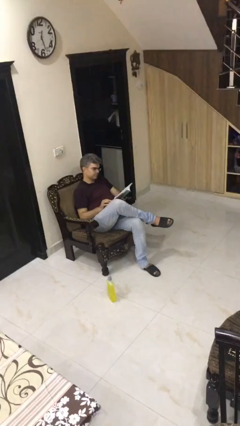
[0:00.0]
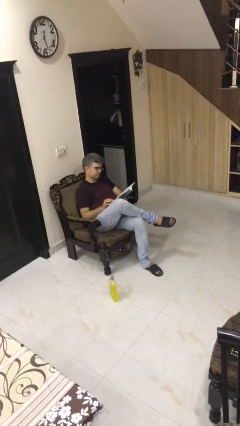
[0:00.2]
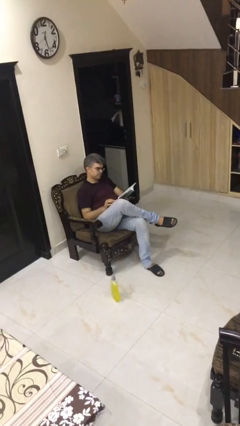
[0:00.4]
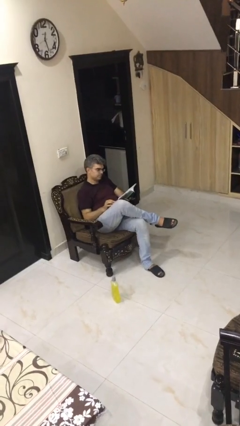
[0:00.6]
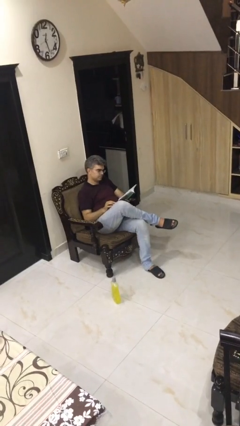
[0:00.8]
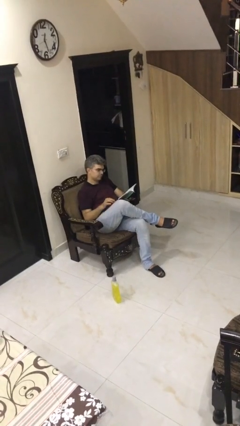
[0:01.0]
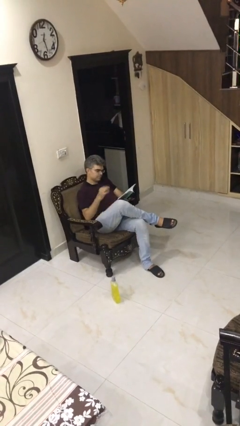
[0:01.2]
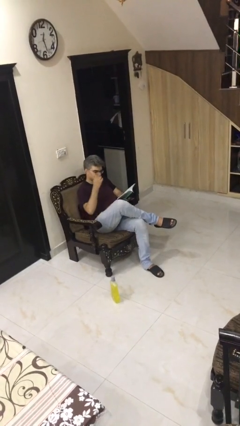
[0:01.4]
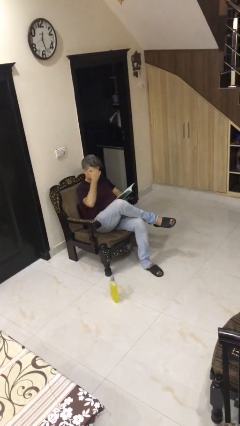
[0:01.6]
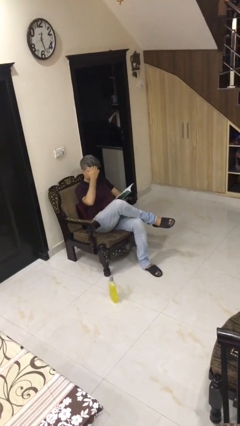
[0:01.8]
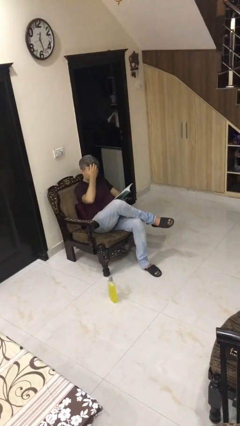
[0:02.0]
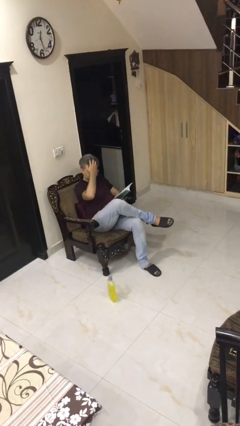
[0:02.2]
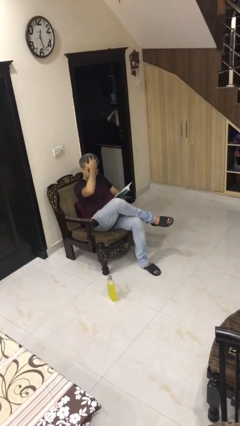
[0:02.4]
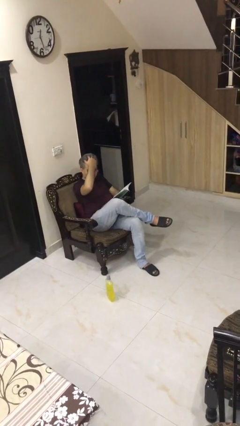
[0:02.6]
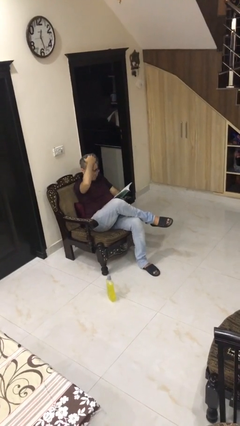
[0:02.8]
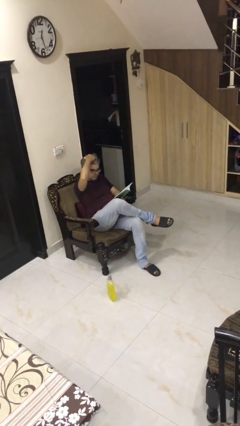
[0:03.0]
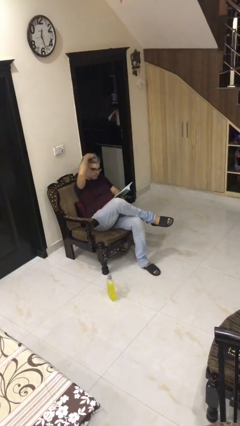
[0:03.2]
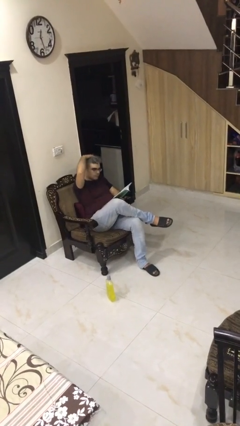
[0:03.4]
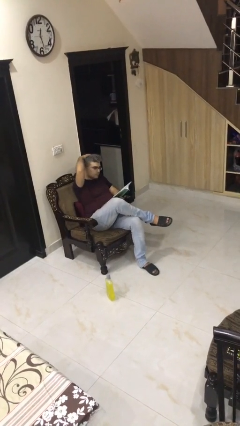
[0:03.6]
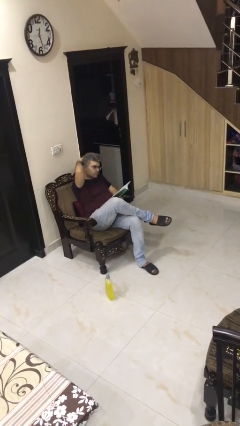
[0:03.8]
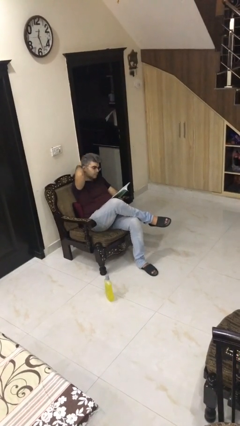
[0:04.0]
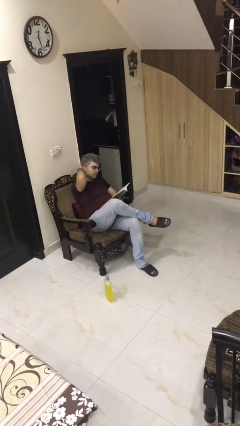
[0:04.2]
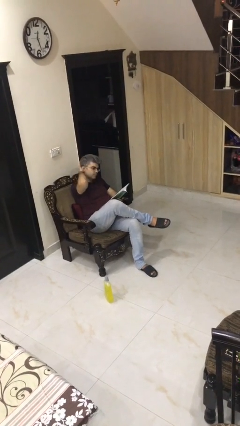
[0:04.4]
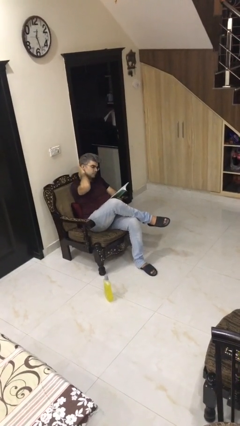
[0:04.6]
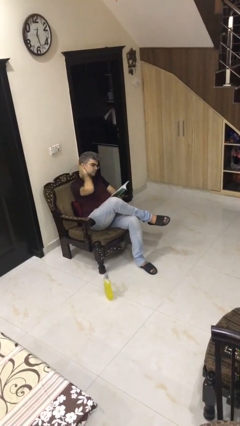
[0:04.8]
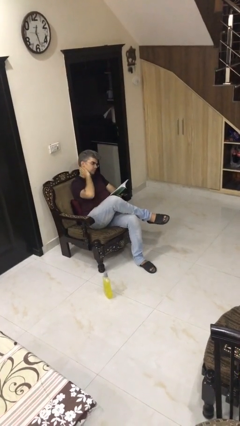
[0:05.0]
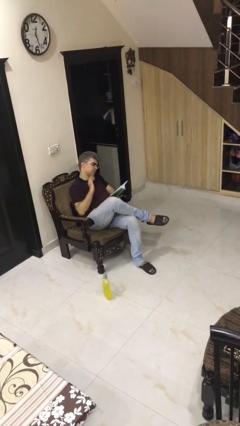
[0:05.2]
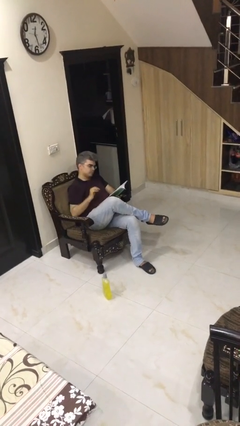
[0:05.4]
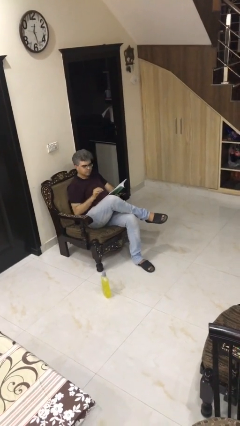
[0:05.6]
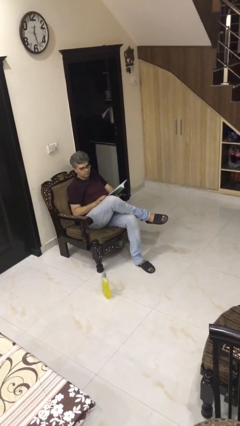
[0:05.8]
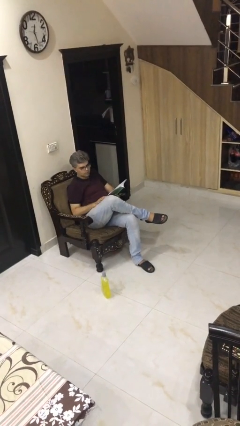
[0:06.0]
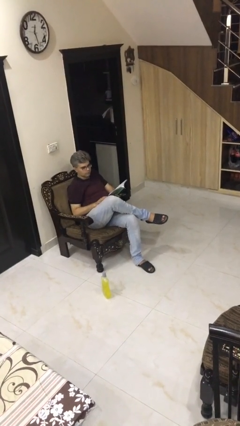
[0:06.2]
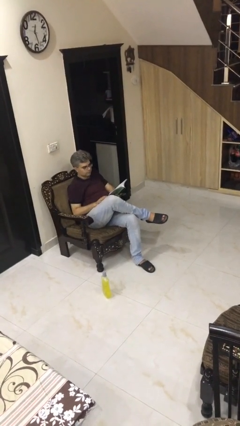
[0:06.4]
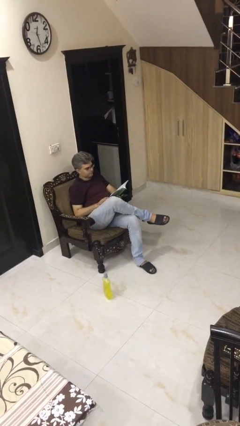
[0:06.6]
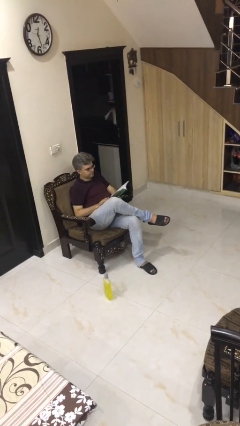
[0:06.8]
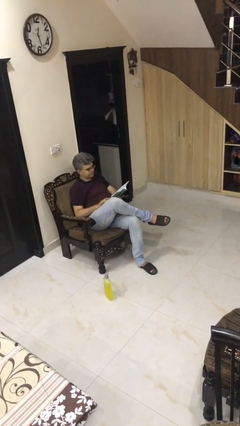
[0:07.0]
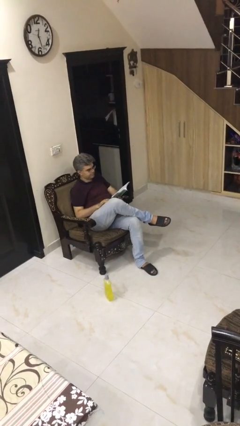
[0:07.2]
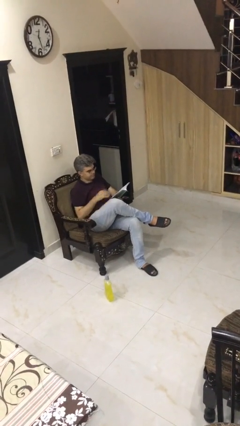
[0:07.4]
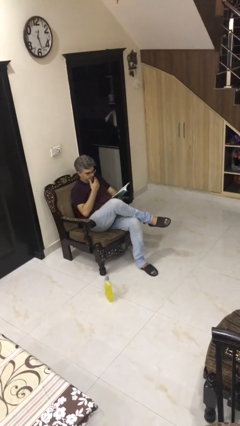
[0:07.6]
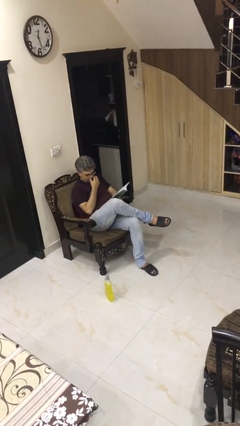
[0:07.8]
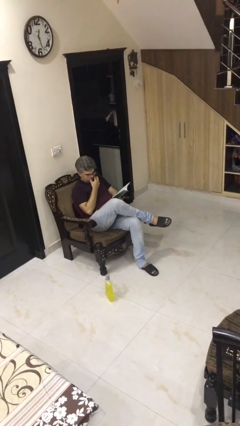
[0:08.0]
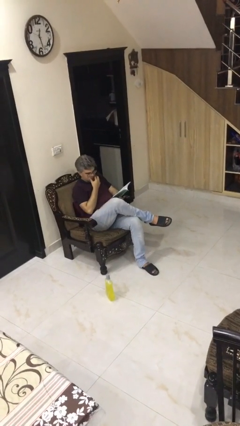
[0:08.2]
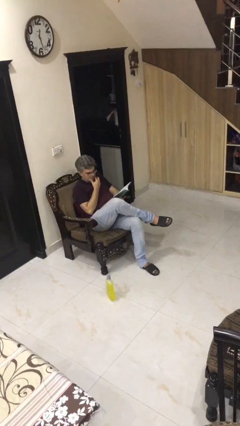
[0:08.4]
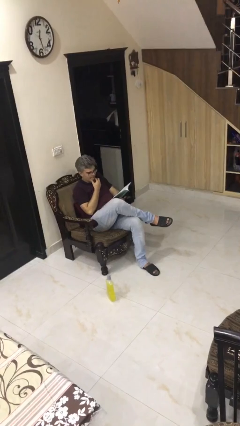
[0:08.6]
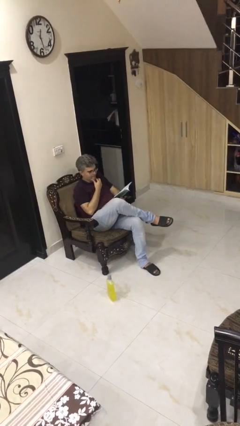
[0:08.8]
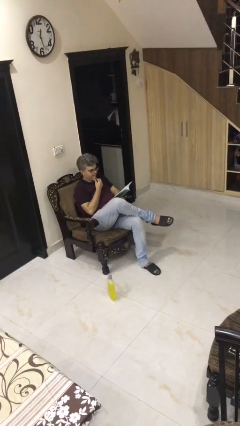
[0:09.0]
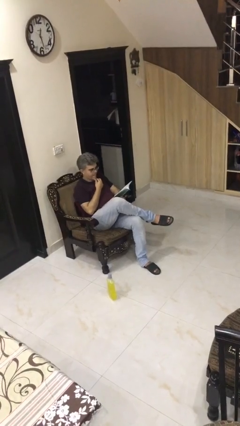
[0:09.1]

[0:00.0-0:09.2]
person reads document

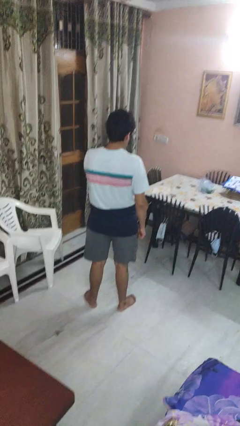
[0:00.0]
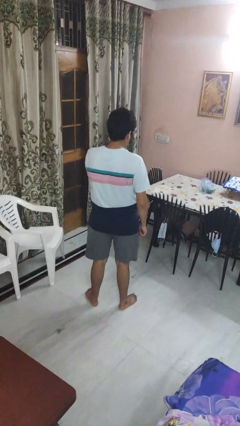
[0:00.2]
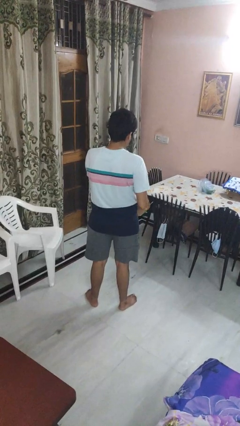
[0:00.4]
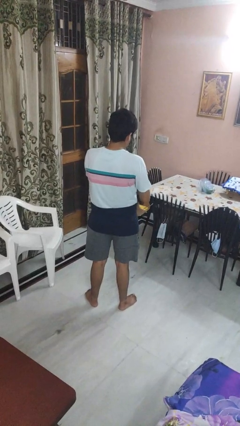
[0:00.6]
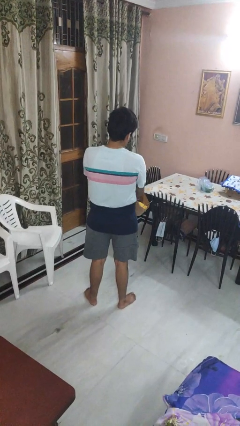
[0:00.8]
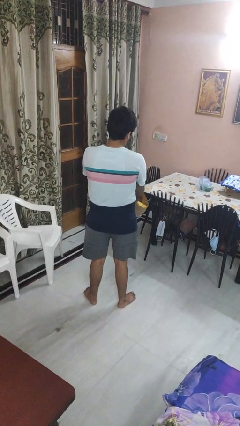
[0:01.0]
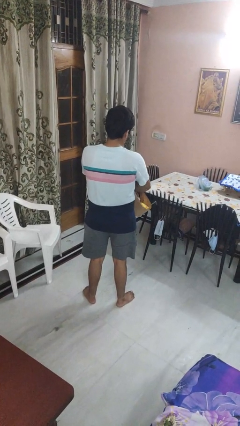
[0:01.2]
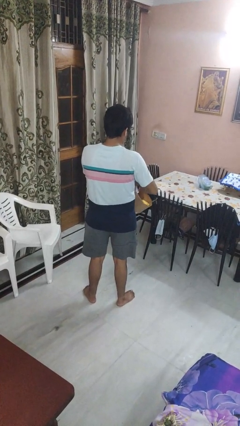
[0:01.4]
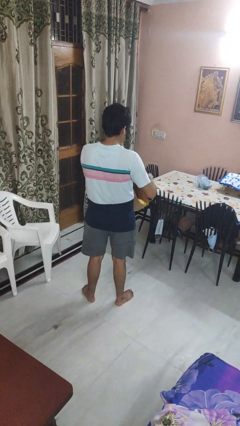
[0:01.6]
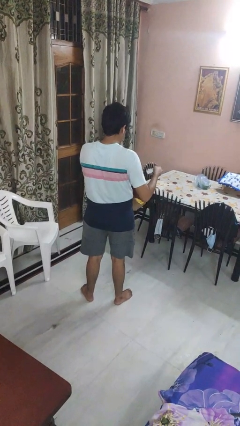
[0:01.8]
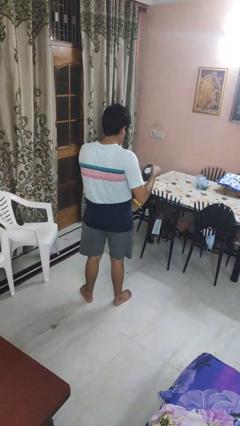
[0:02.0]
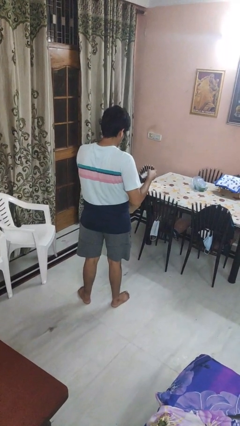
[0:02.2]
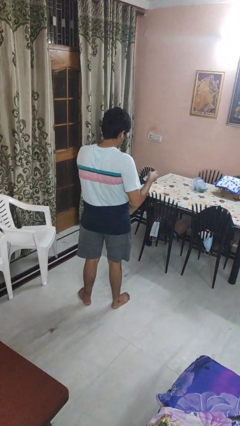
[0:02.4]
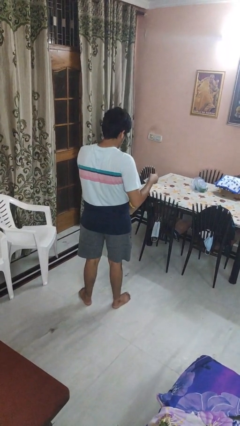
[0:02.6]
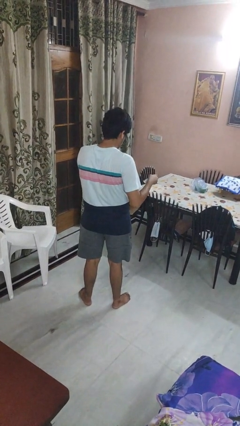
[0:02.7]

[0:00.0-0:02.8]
person takes object from bag

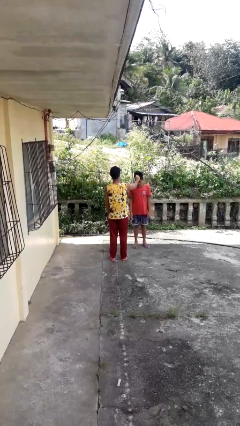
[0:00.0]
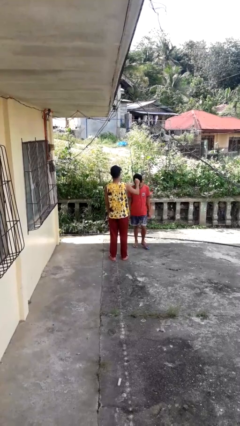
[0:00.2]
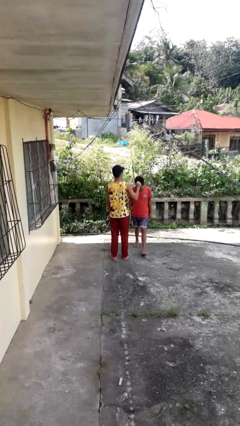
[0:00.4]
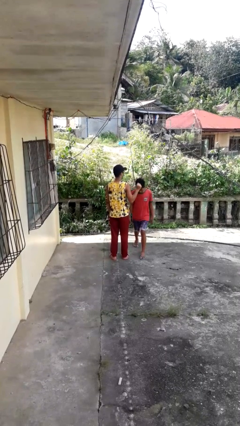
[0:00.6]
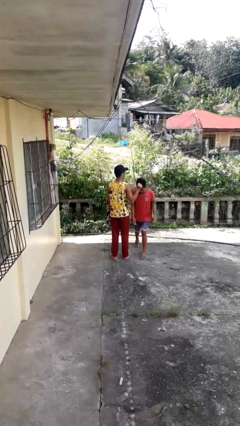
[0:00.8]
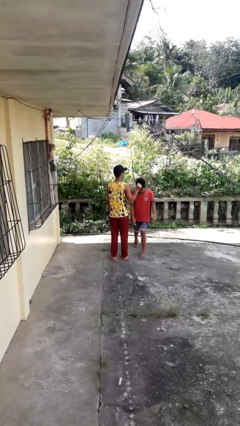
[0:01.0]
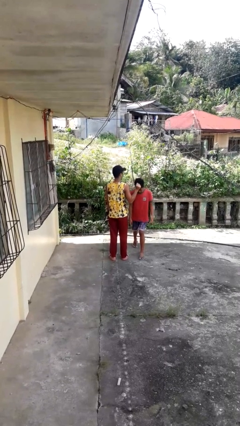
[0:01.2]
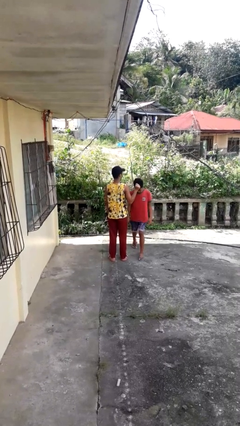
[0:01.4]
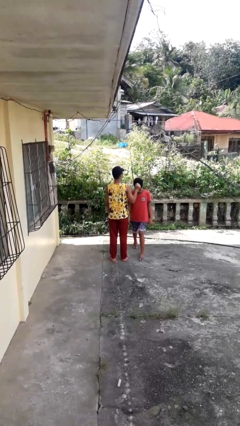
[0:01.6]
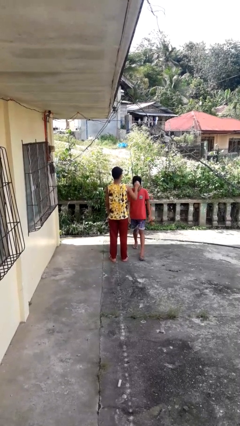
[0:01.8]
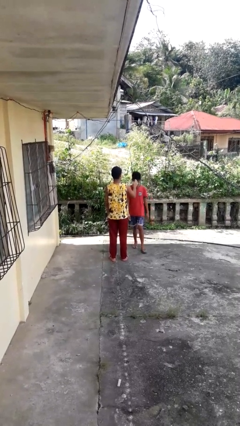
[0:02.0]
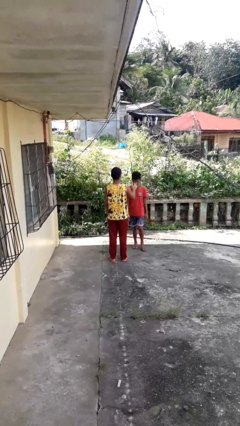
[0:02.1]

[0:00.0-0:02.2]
person grabs person by hair

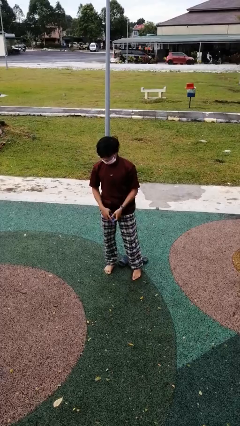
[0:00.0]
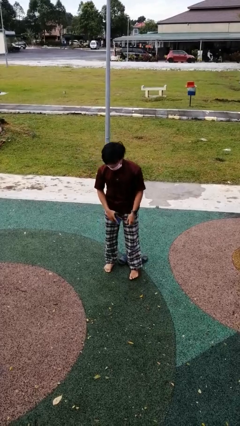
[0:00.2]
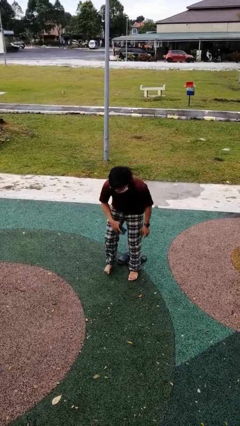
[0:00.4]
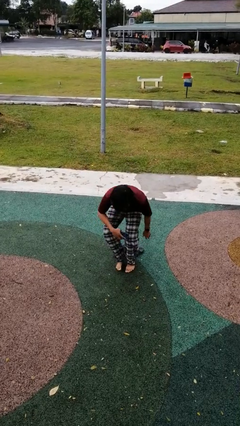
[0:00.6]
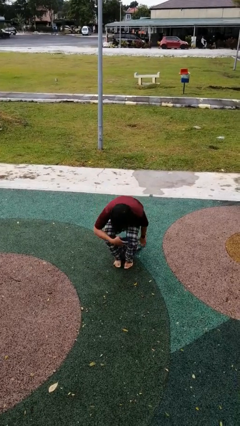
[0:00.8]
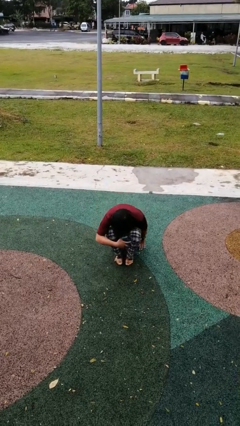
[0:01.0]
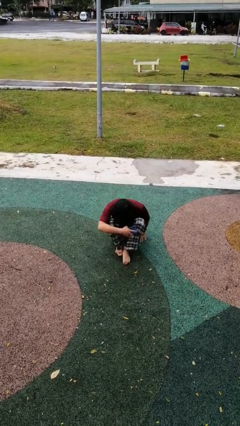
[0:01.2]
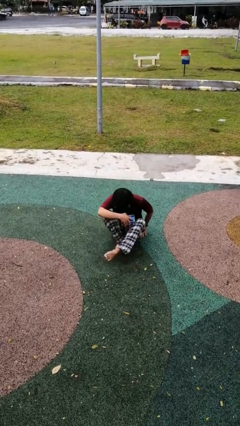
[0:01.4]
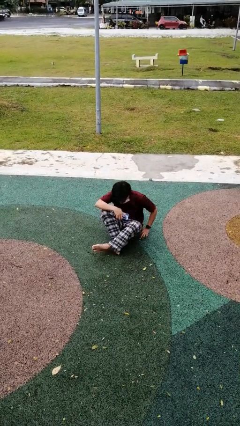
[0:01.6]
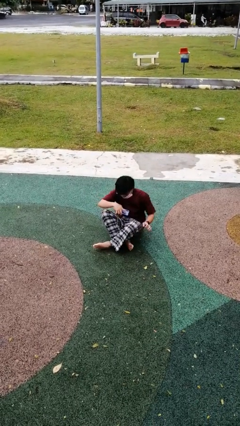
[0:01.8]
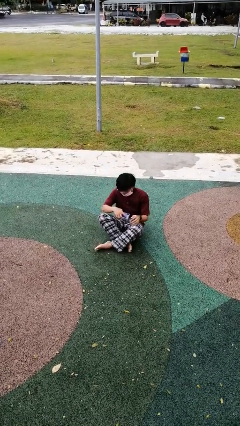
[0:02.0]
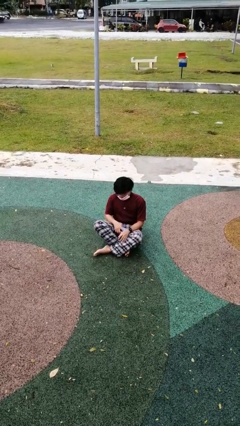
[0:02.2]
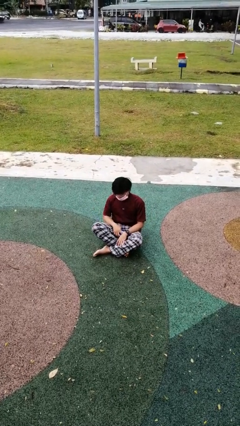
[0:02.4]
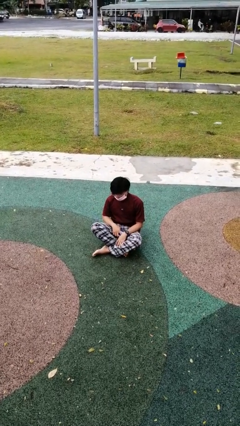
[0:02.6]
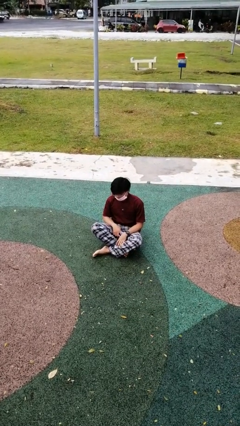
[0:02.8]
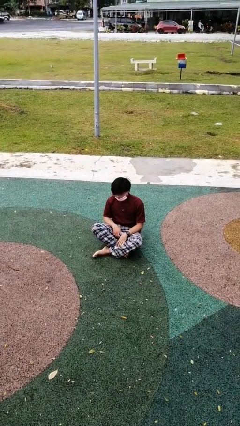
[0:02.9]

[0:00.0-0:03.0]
person sits crisscross

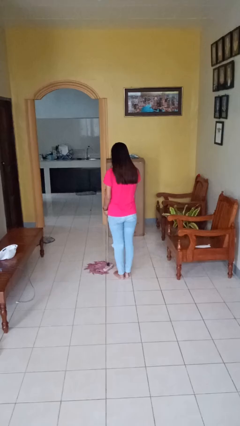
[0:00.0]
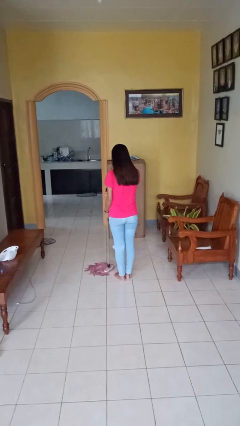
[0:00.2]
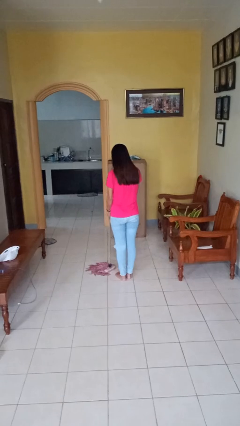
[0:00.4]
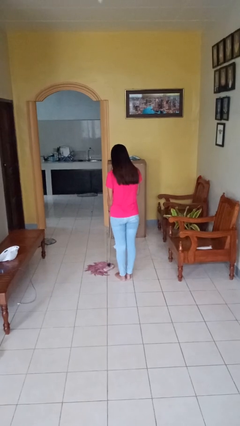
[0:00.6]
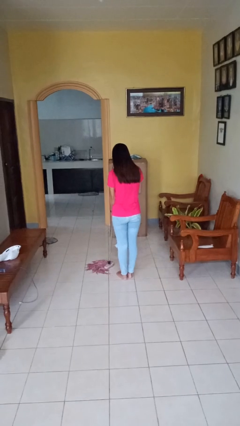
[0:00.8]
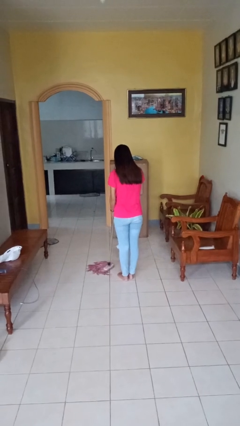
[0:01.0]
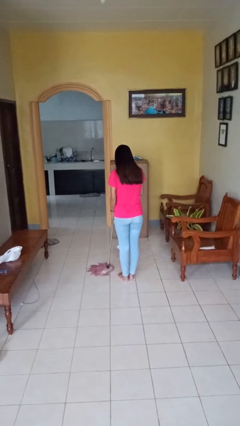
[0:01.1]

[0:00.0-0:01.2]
person mops
